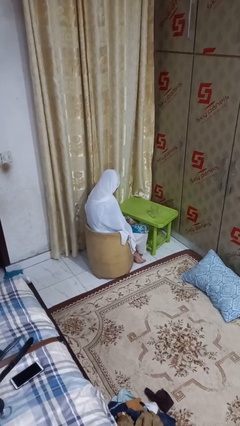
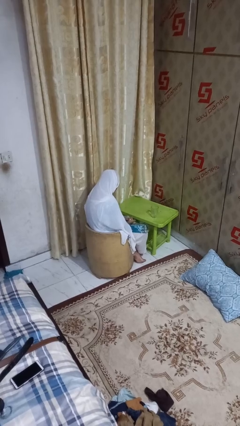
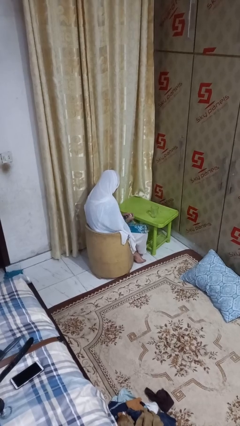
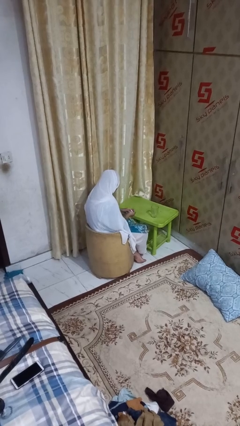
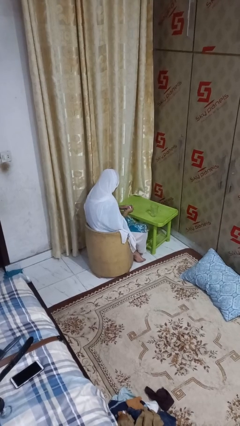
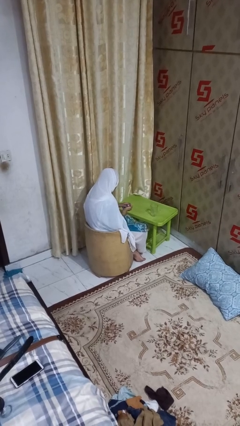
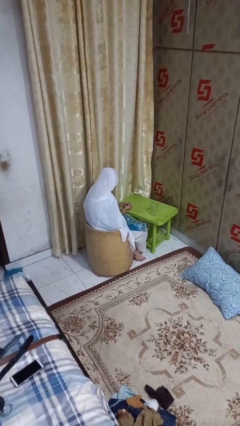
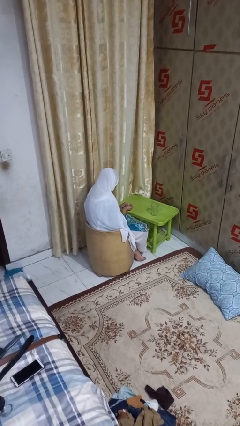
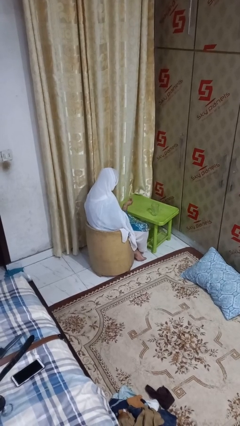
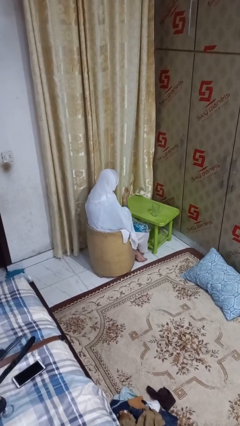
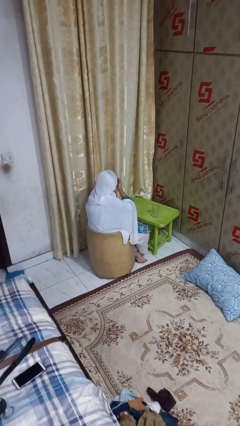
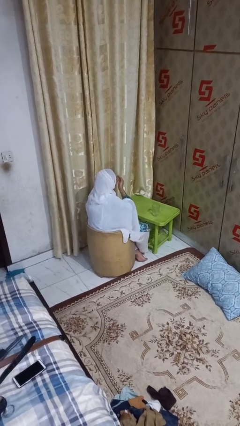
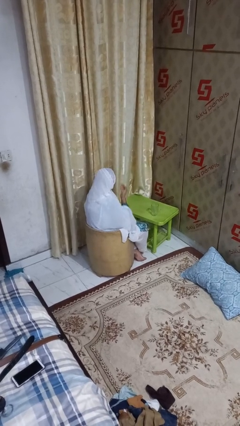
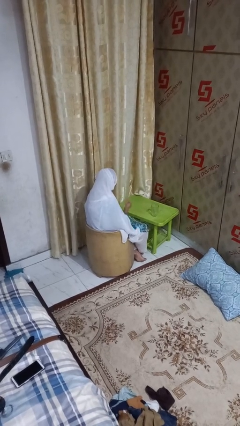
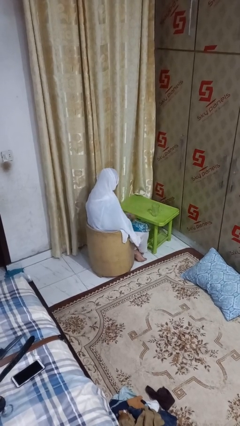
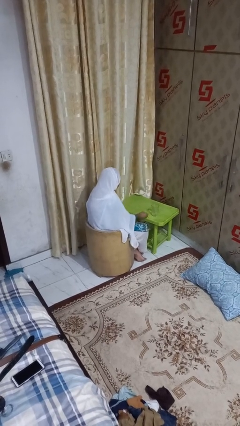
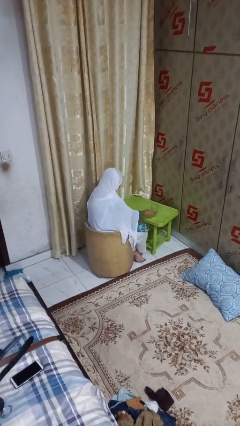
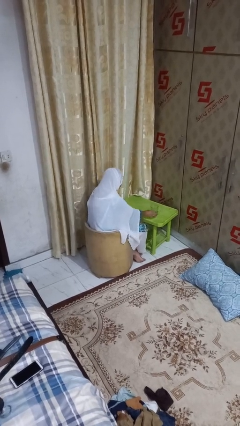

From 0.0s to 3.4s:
person takes medicine pills

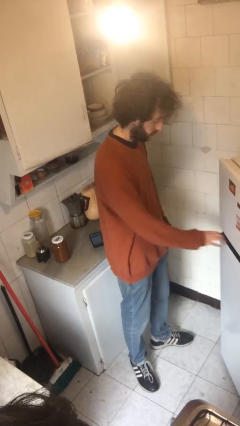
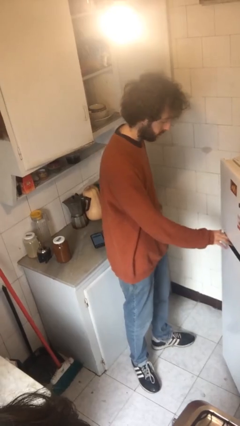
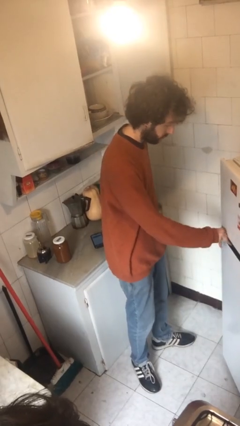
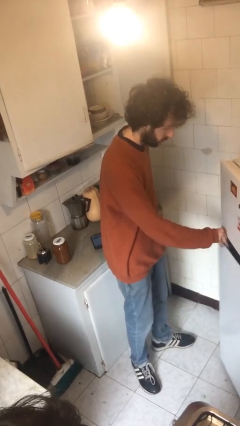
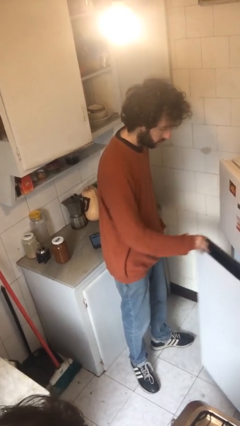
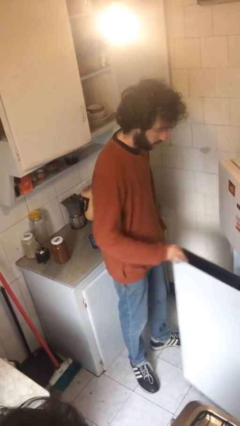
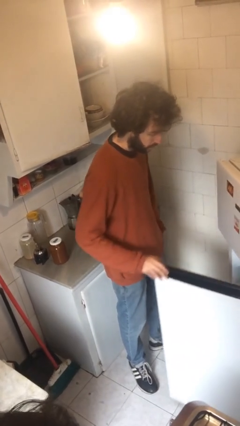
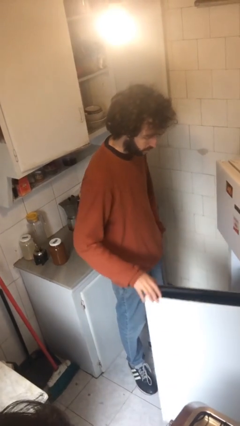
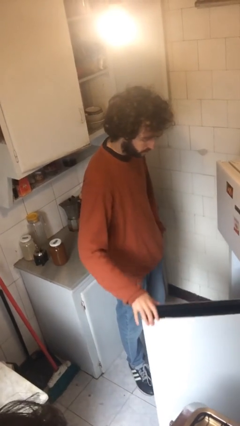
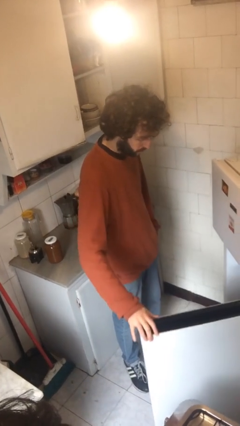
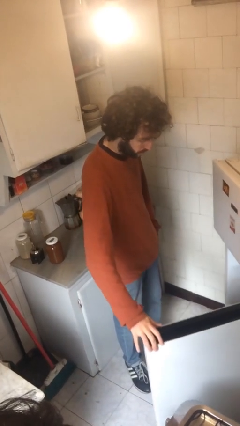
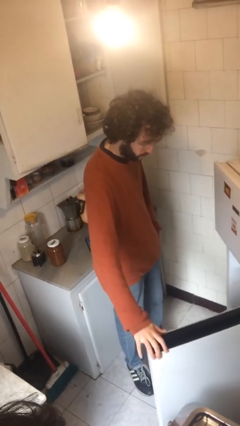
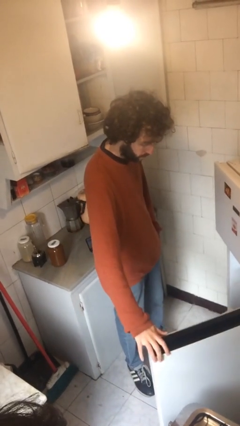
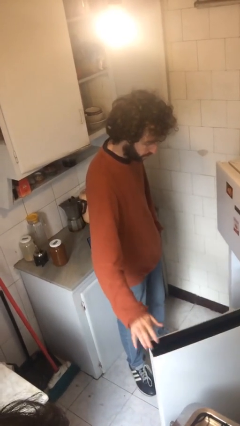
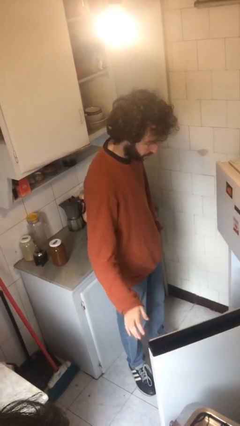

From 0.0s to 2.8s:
person opens refrigerator

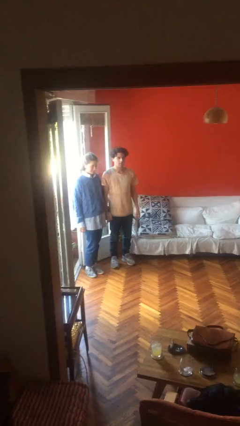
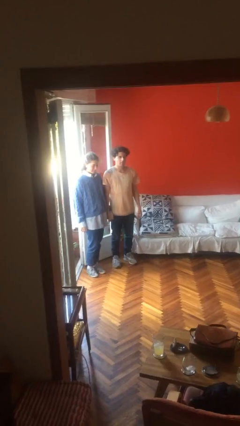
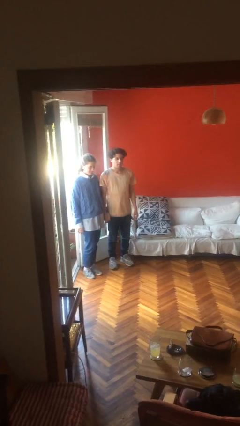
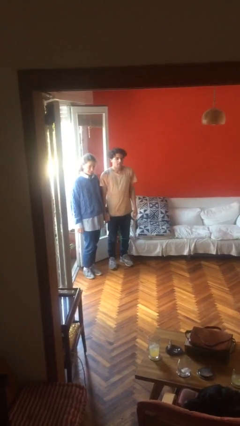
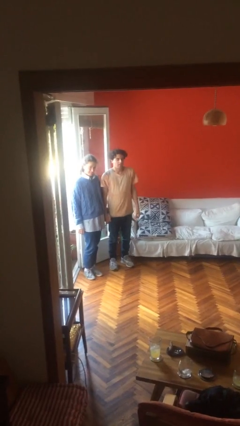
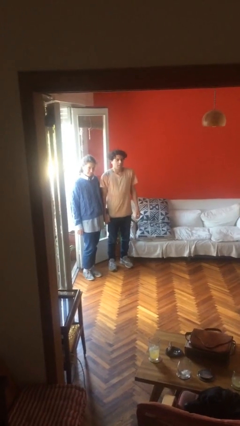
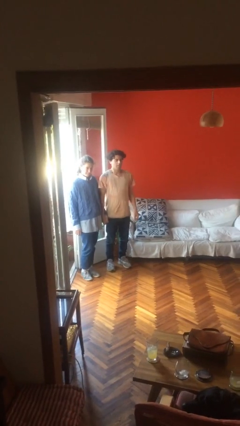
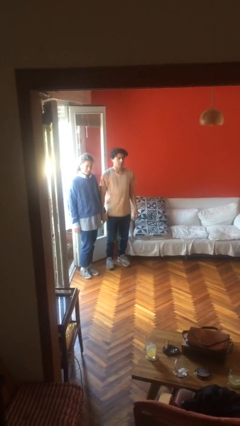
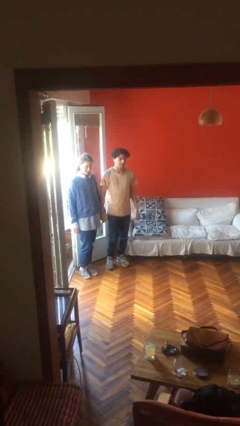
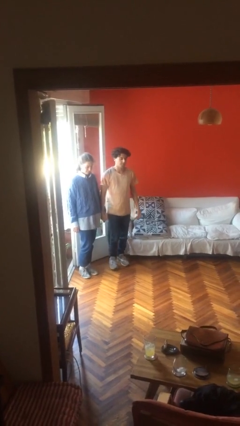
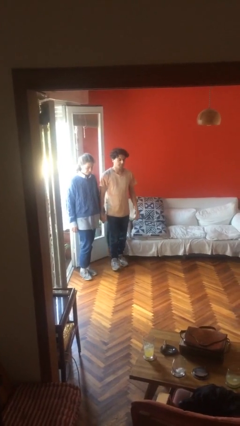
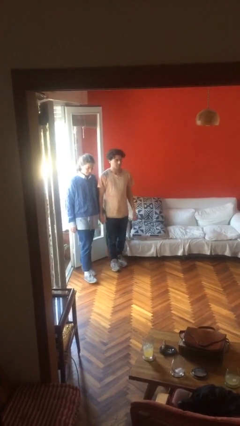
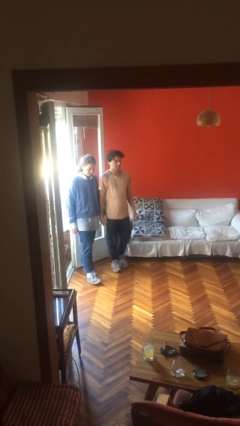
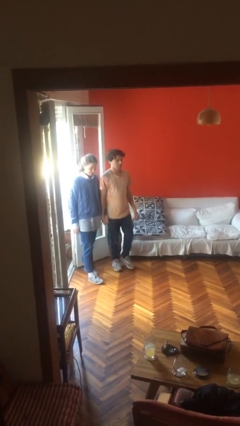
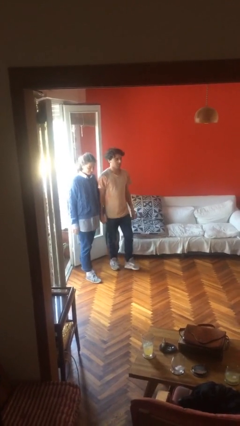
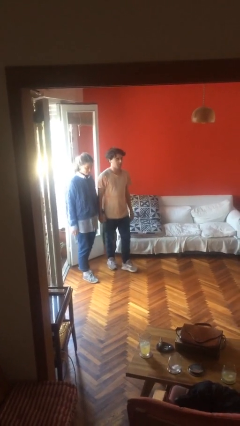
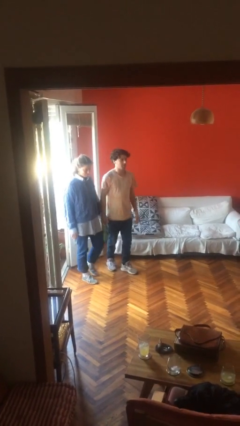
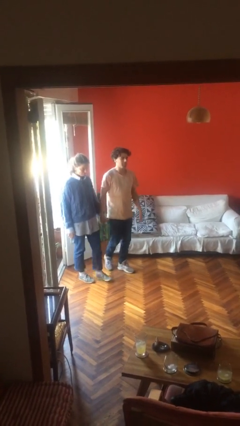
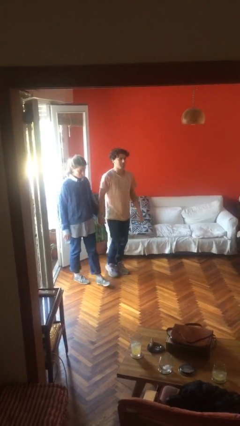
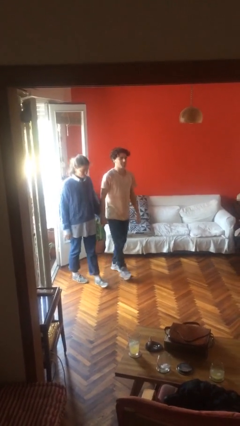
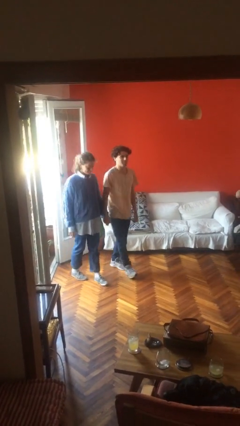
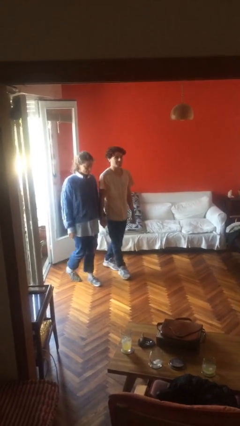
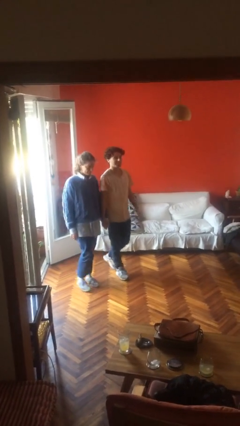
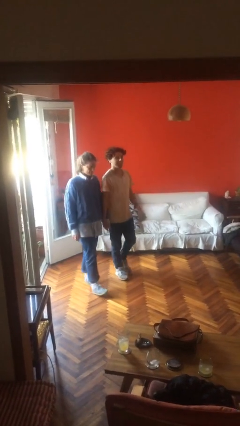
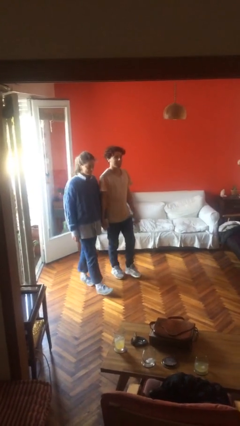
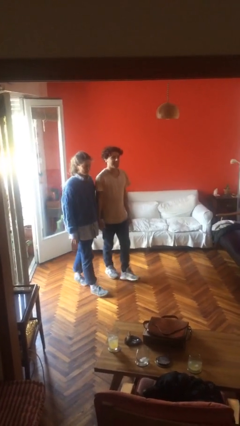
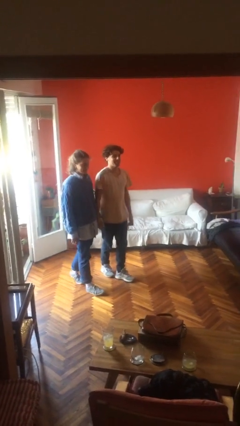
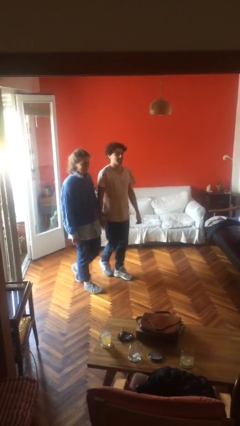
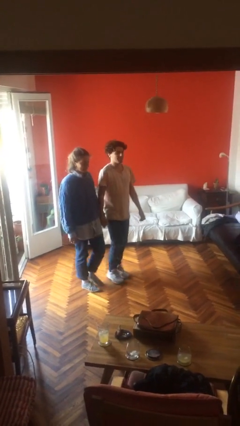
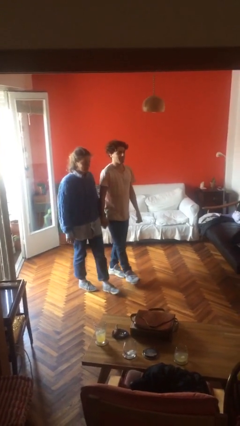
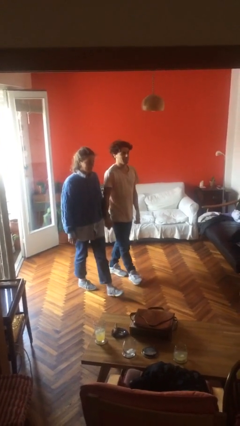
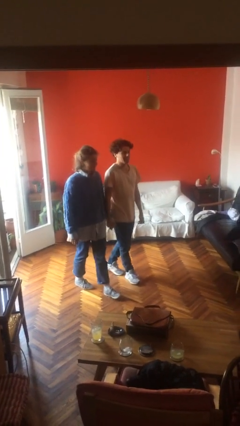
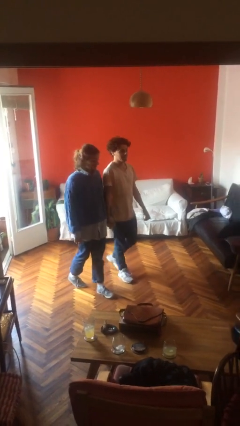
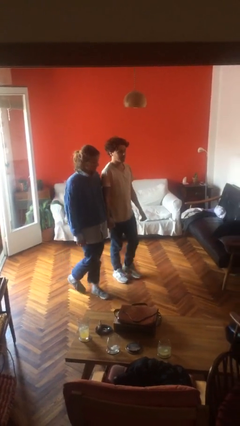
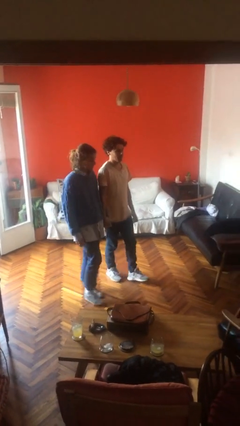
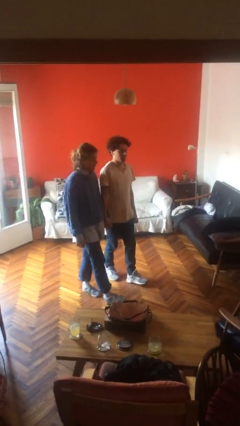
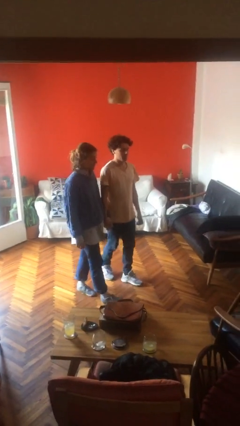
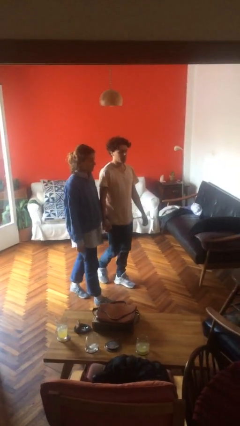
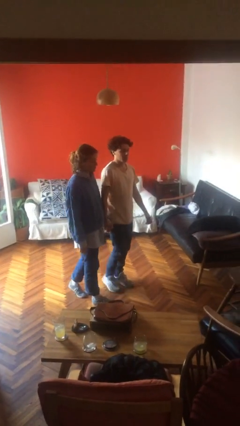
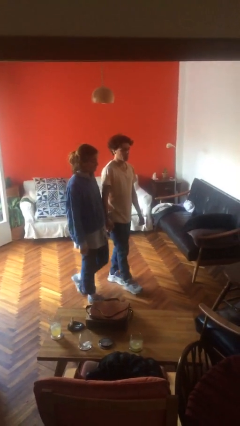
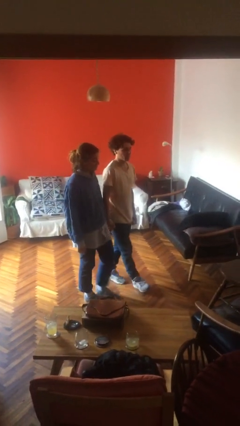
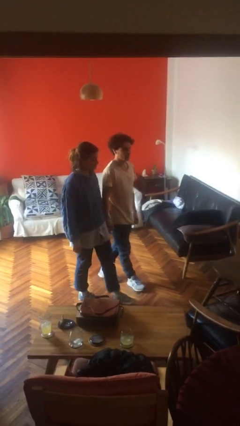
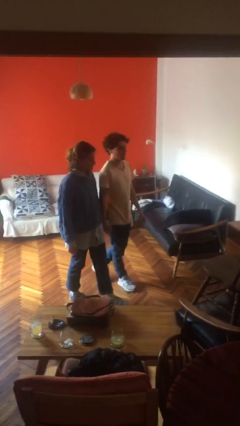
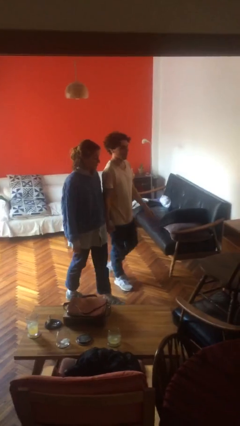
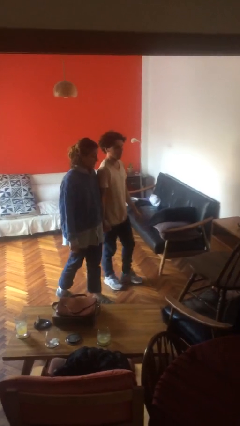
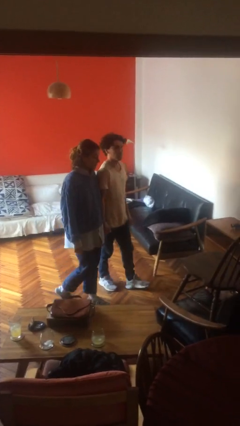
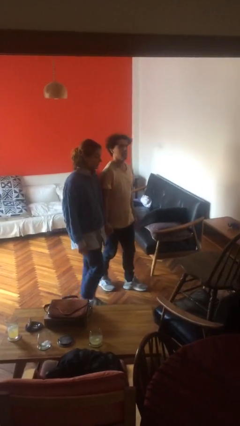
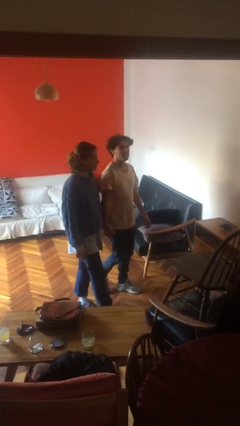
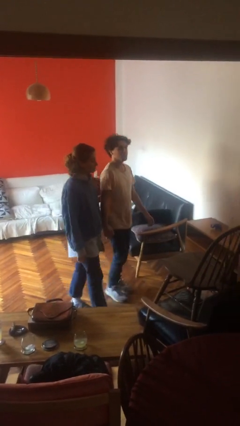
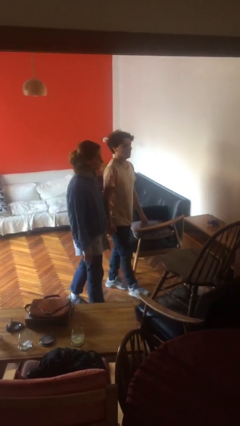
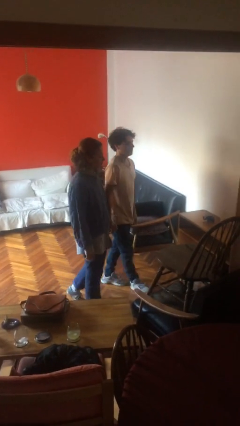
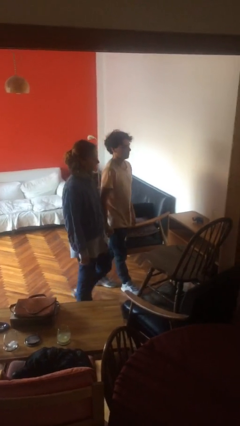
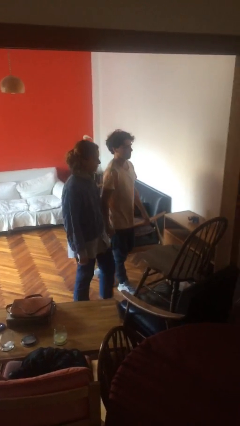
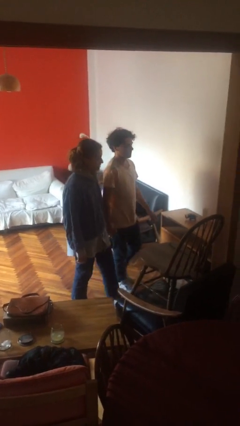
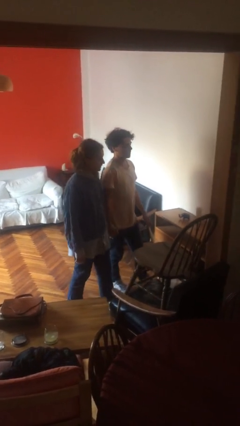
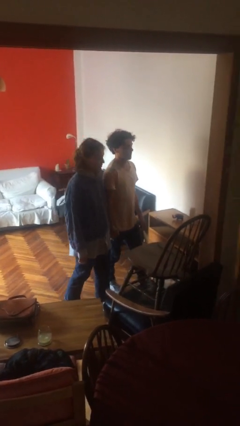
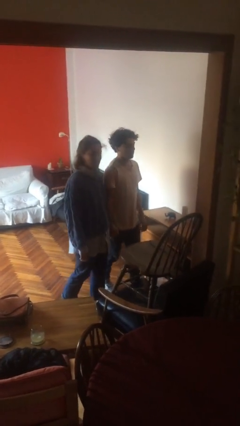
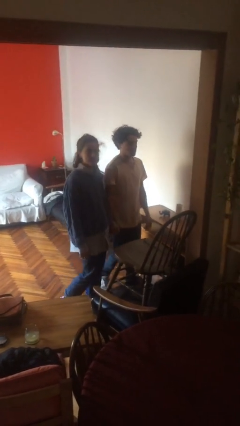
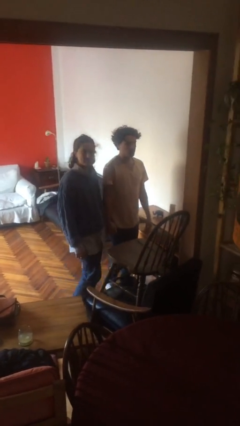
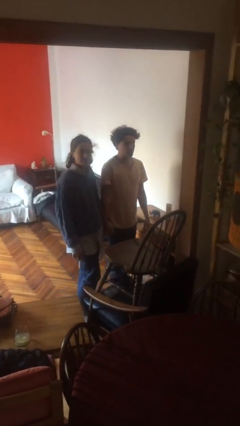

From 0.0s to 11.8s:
person holds hand

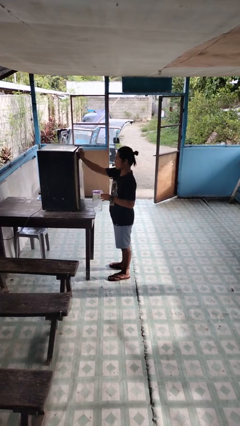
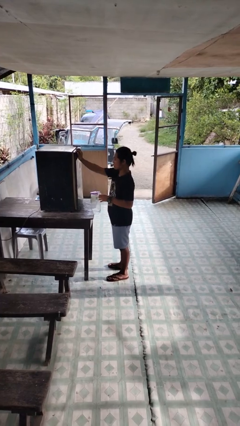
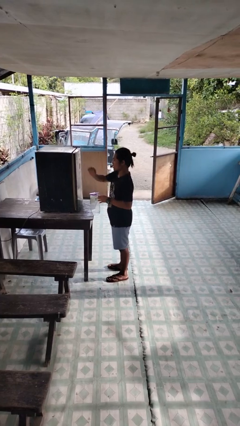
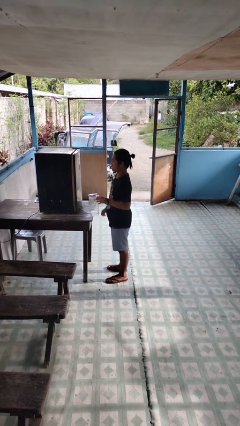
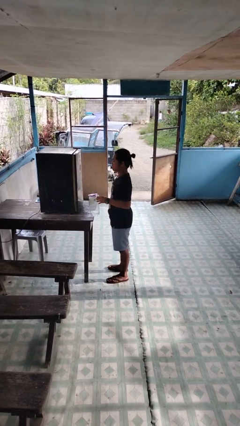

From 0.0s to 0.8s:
person closes refrigerator
